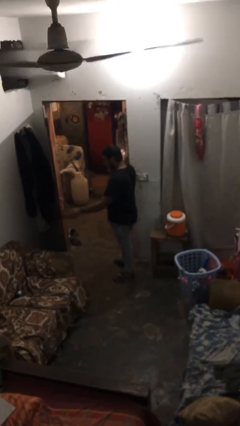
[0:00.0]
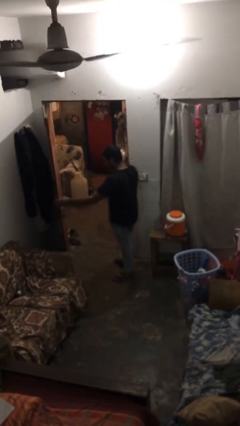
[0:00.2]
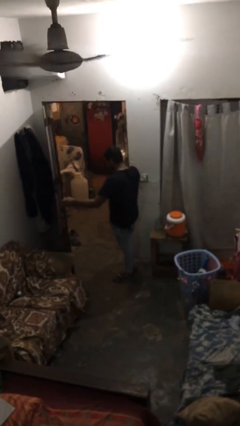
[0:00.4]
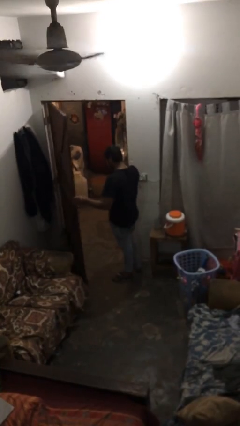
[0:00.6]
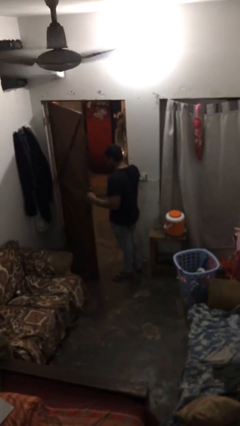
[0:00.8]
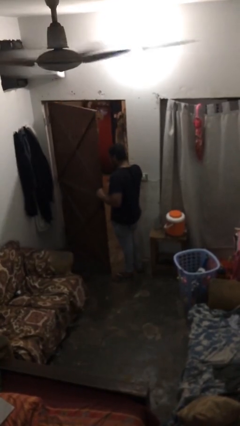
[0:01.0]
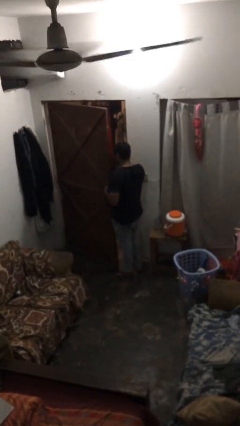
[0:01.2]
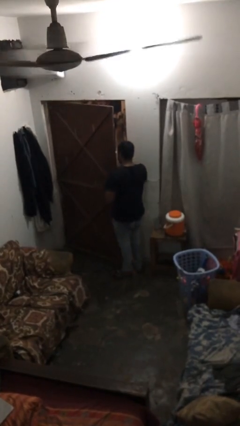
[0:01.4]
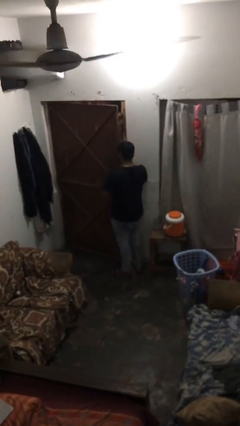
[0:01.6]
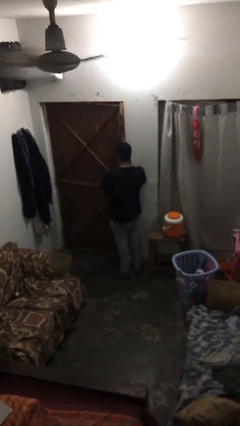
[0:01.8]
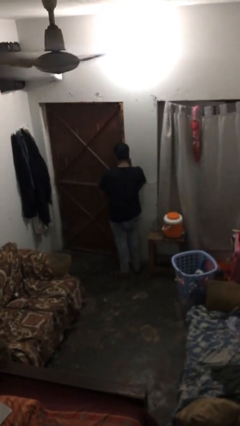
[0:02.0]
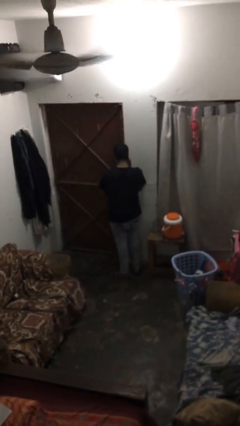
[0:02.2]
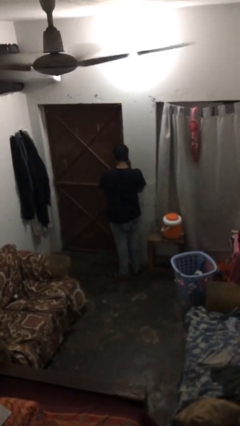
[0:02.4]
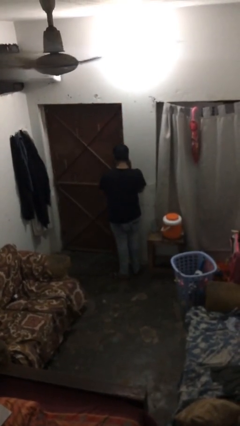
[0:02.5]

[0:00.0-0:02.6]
person closes facility door

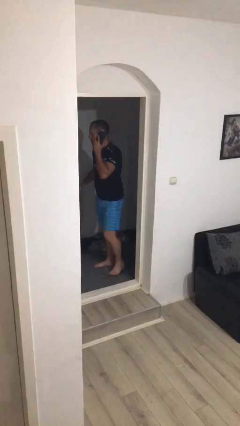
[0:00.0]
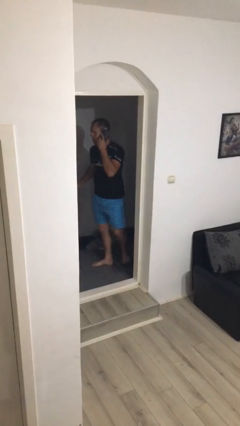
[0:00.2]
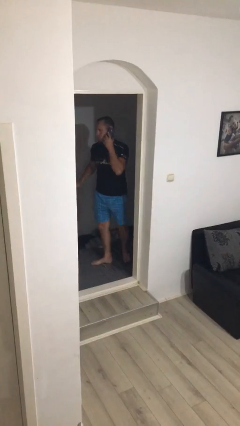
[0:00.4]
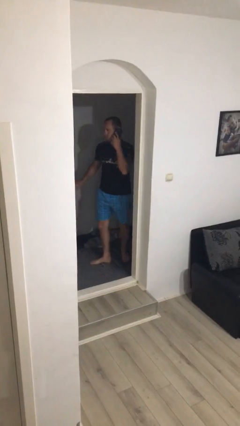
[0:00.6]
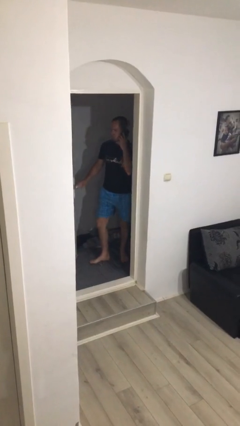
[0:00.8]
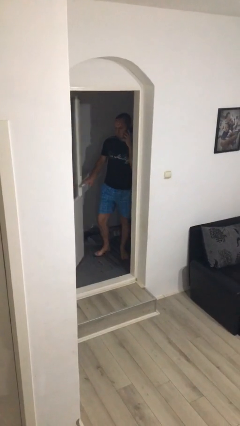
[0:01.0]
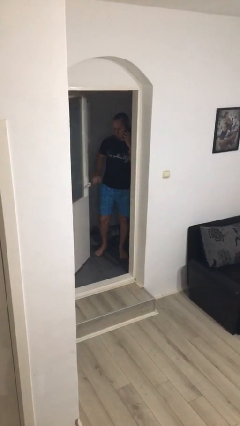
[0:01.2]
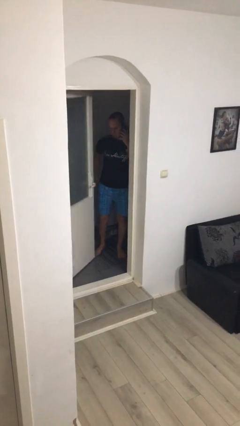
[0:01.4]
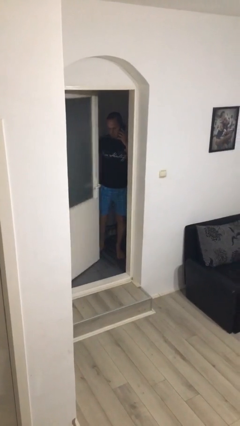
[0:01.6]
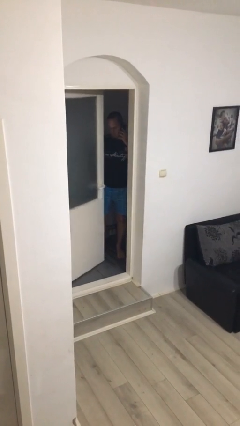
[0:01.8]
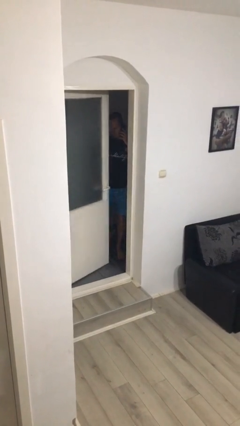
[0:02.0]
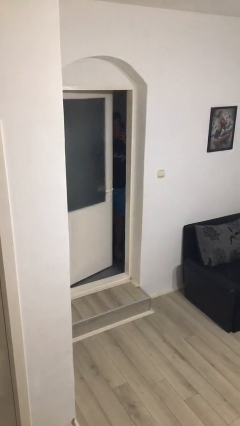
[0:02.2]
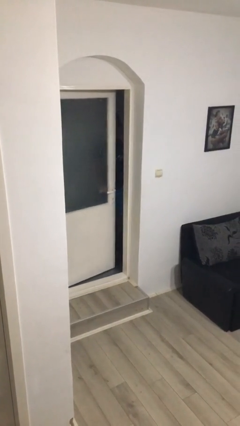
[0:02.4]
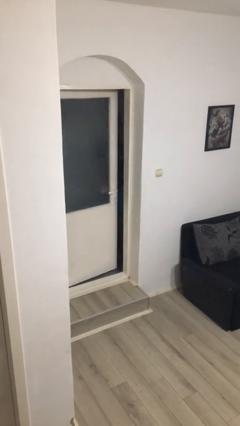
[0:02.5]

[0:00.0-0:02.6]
person exits scene through structure

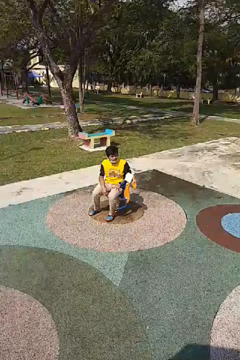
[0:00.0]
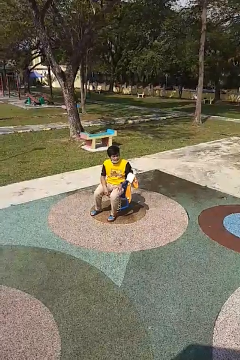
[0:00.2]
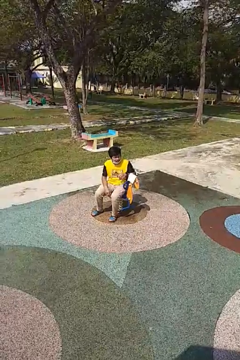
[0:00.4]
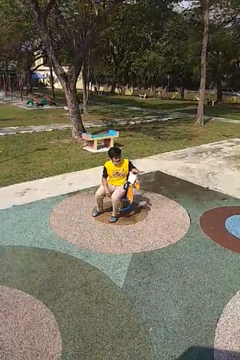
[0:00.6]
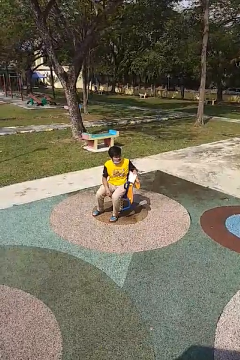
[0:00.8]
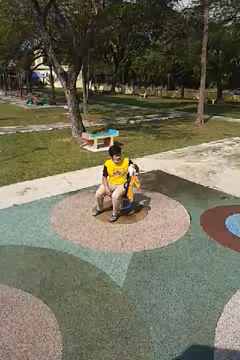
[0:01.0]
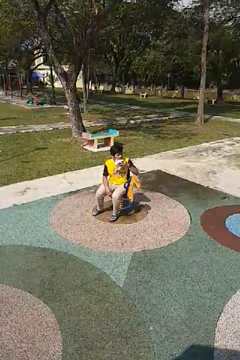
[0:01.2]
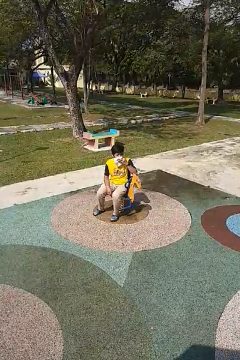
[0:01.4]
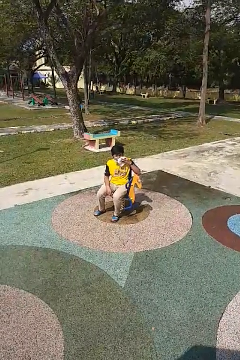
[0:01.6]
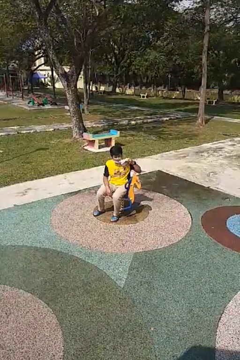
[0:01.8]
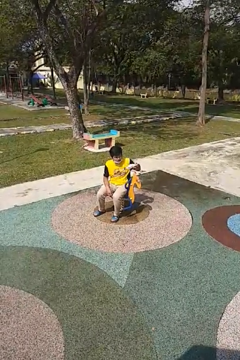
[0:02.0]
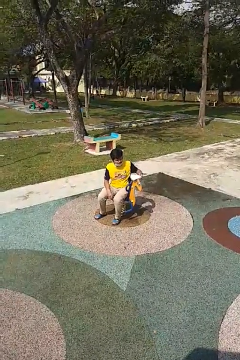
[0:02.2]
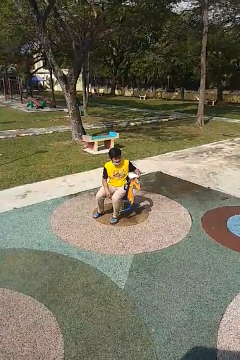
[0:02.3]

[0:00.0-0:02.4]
person wipes mouth with napkin

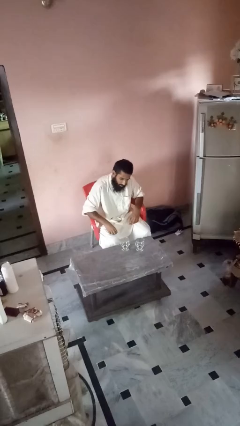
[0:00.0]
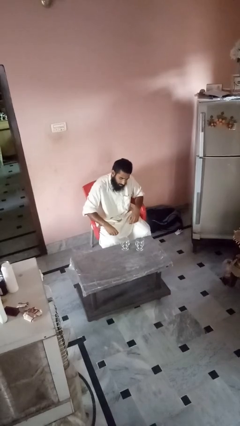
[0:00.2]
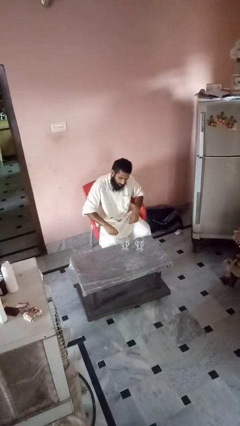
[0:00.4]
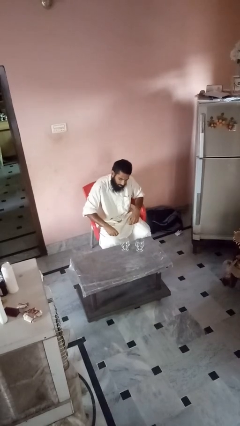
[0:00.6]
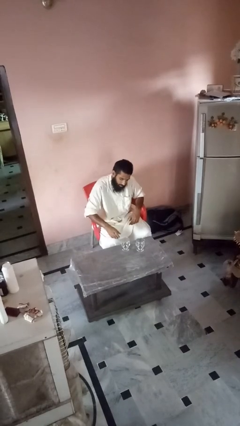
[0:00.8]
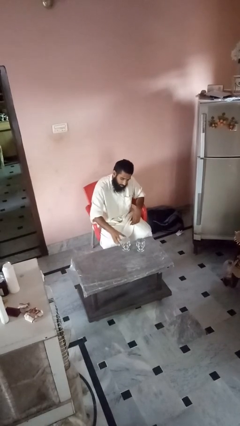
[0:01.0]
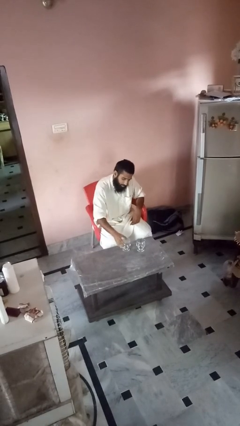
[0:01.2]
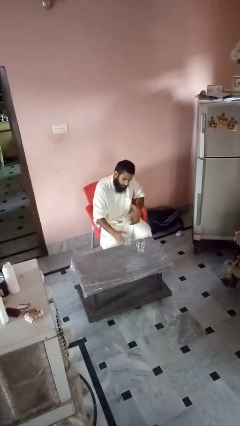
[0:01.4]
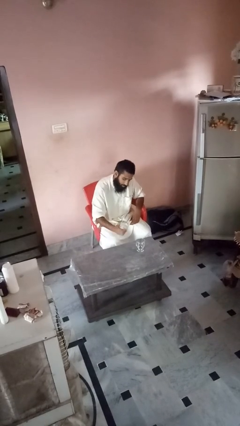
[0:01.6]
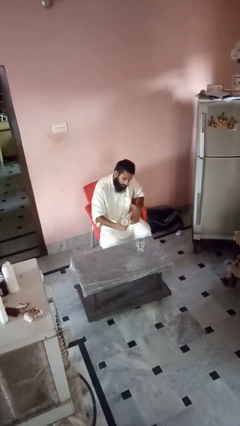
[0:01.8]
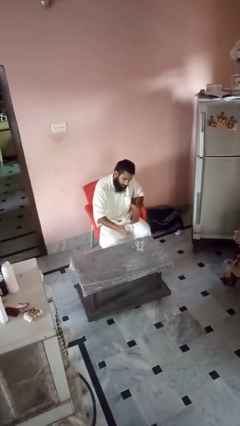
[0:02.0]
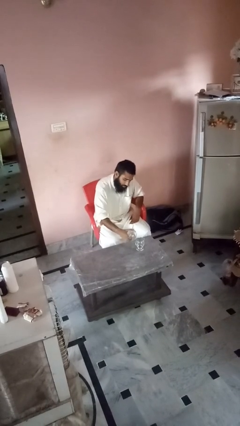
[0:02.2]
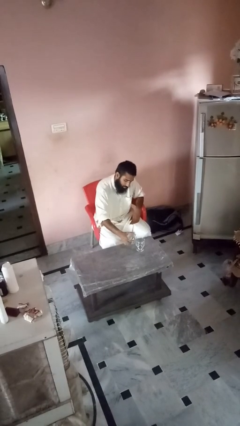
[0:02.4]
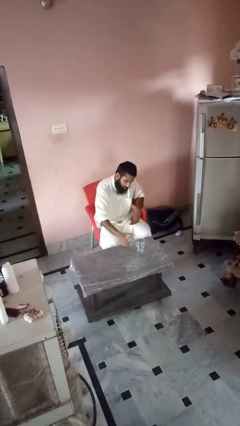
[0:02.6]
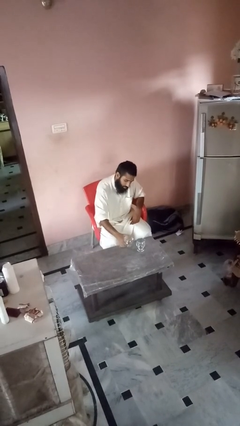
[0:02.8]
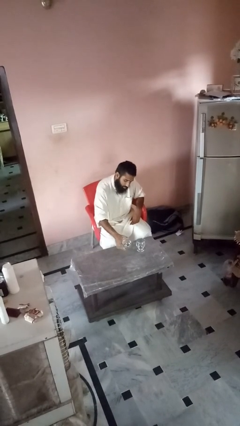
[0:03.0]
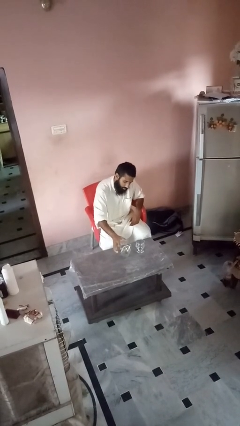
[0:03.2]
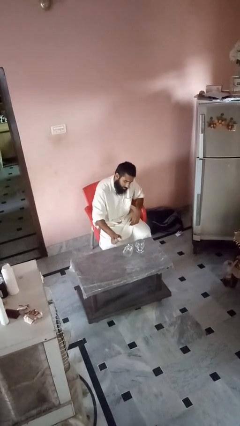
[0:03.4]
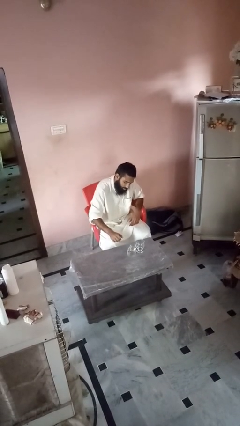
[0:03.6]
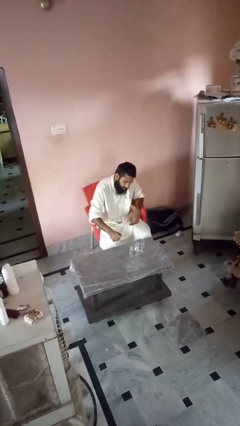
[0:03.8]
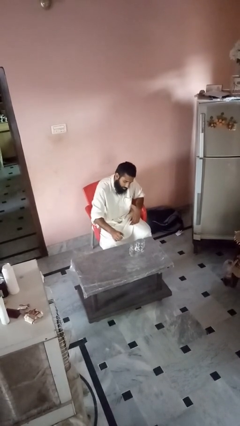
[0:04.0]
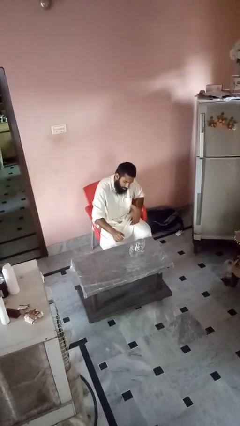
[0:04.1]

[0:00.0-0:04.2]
person knocks over glass

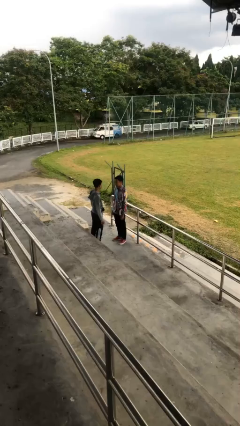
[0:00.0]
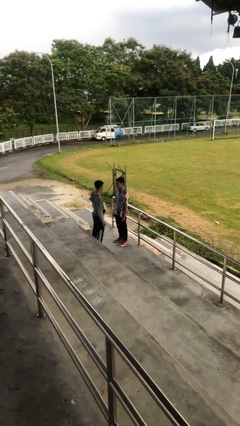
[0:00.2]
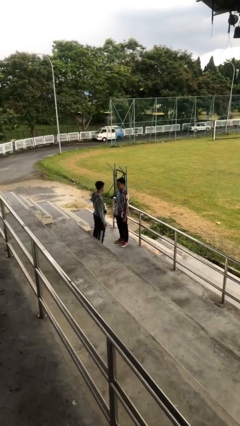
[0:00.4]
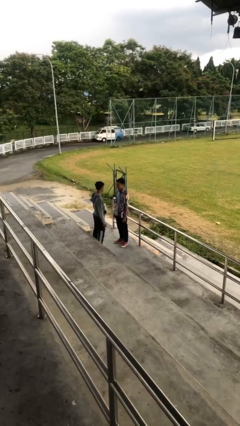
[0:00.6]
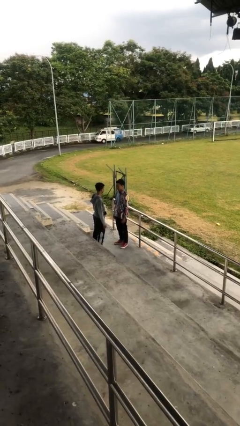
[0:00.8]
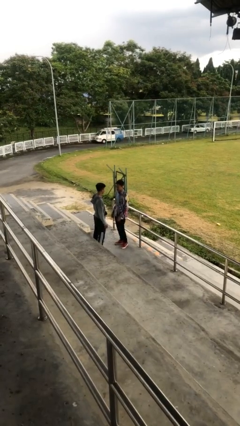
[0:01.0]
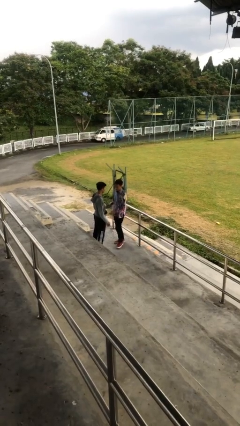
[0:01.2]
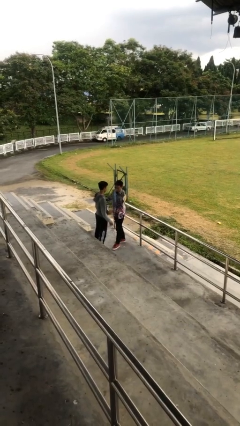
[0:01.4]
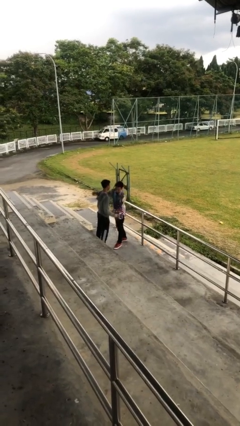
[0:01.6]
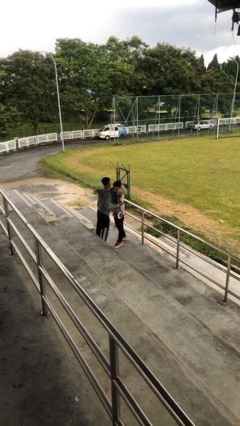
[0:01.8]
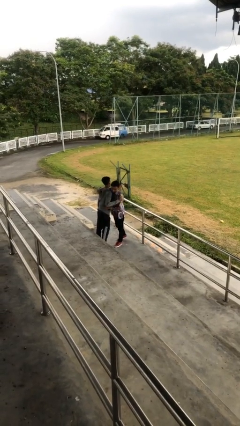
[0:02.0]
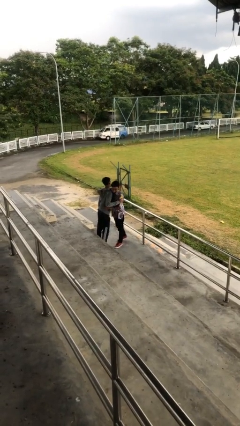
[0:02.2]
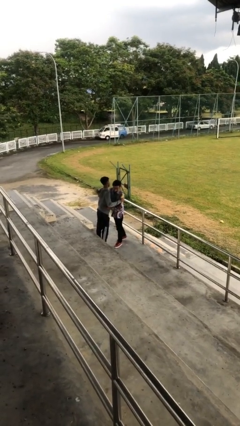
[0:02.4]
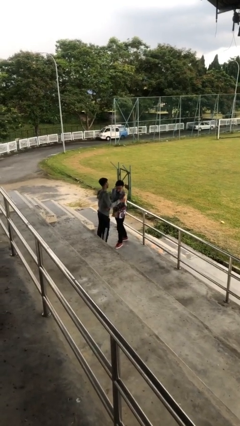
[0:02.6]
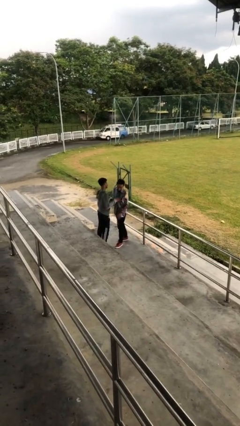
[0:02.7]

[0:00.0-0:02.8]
person embraces person

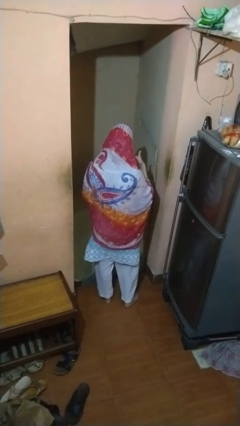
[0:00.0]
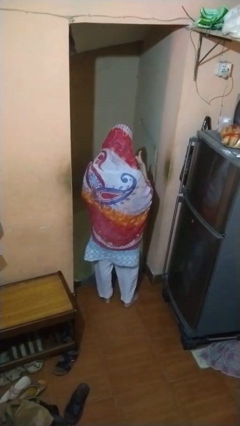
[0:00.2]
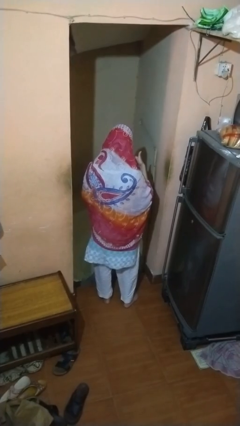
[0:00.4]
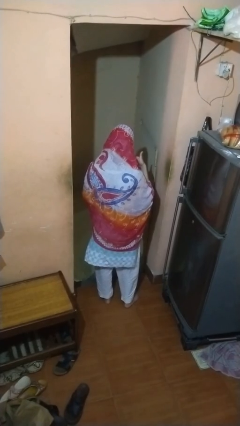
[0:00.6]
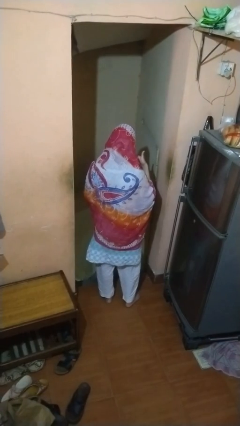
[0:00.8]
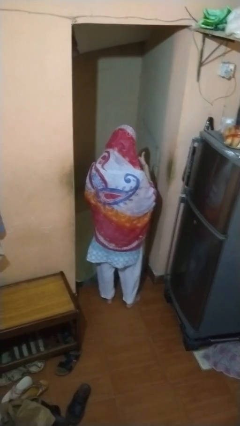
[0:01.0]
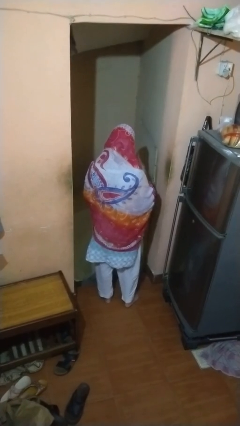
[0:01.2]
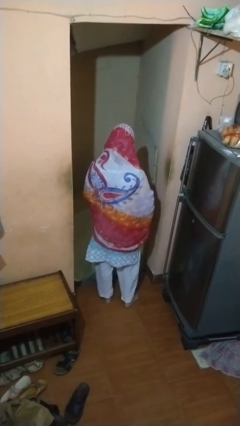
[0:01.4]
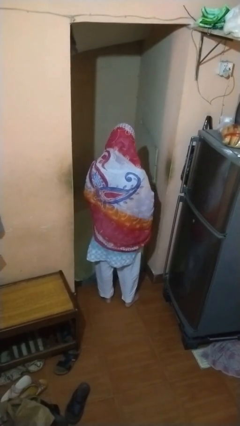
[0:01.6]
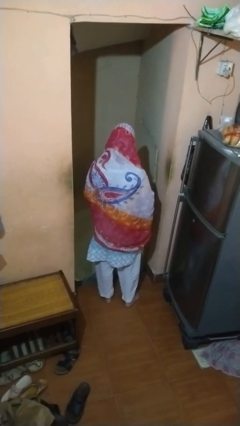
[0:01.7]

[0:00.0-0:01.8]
person gestures call me

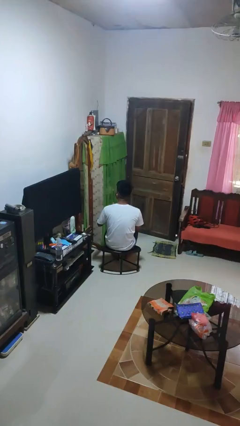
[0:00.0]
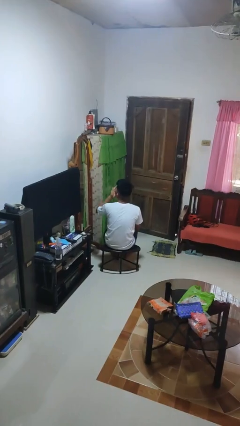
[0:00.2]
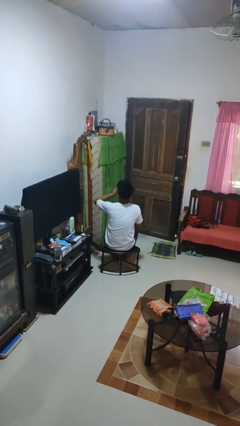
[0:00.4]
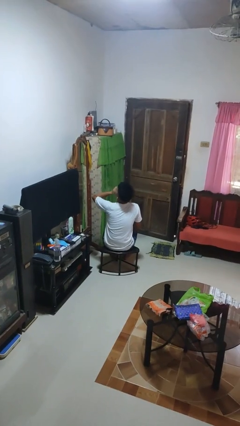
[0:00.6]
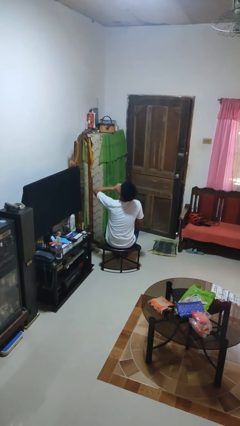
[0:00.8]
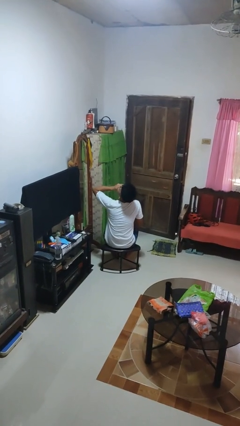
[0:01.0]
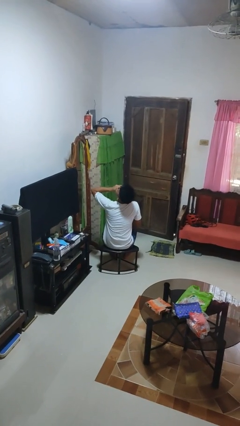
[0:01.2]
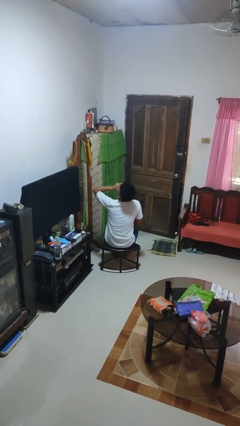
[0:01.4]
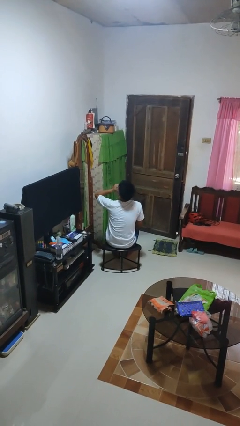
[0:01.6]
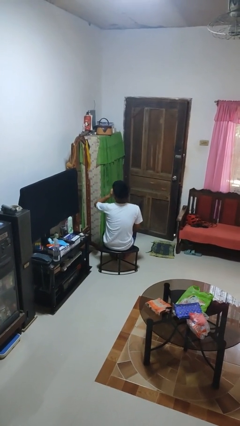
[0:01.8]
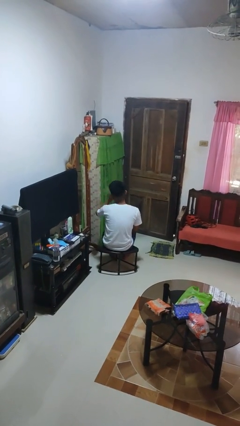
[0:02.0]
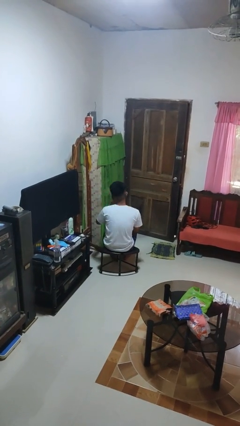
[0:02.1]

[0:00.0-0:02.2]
person yawns
